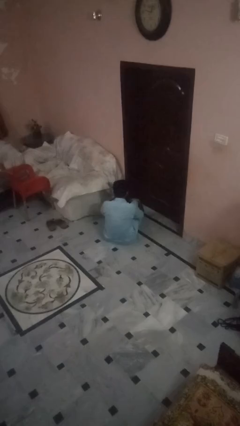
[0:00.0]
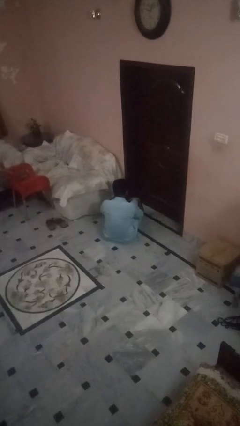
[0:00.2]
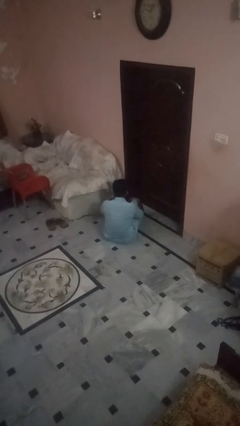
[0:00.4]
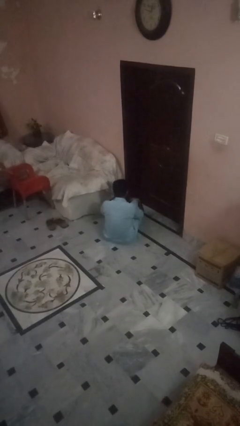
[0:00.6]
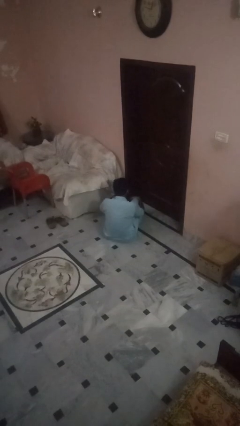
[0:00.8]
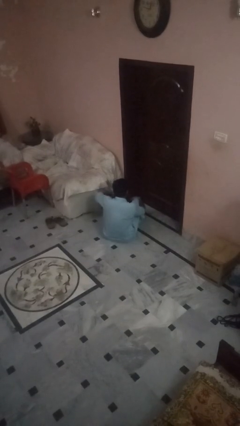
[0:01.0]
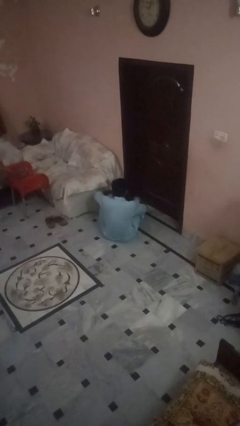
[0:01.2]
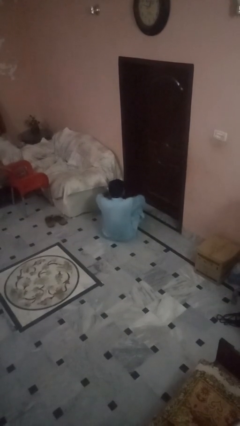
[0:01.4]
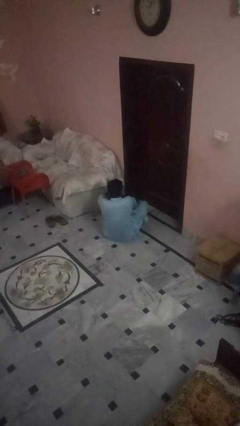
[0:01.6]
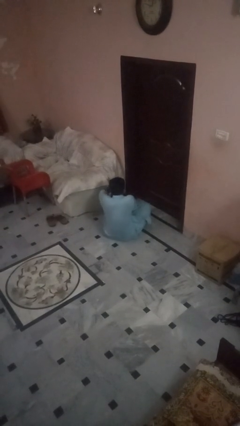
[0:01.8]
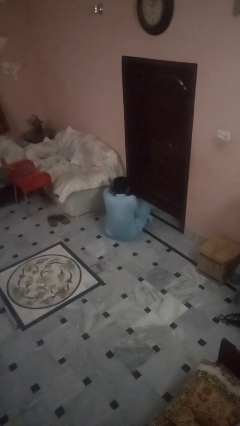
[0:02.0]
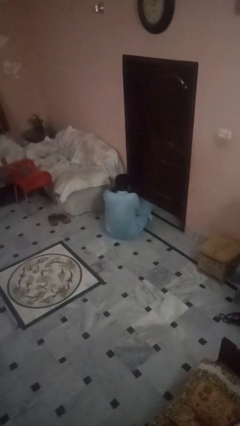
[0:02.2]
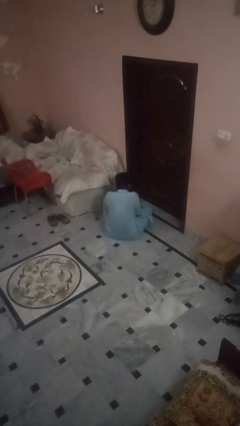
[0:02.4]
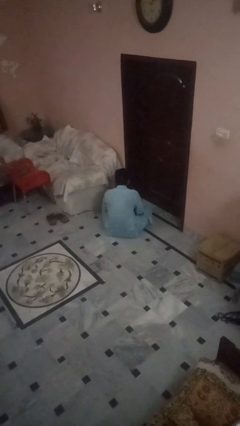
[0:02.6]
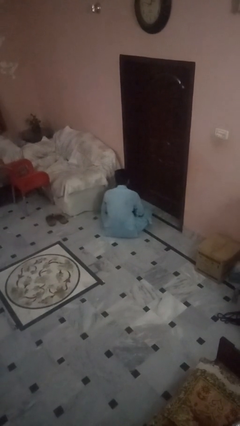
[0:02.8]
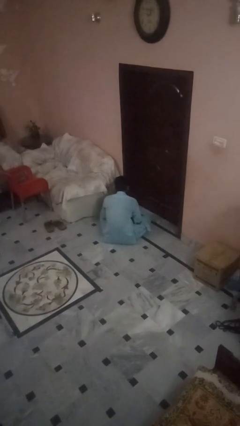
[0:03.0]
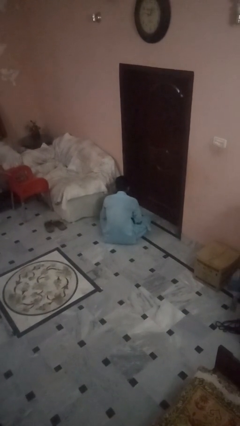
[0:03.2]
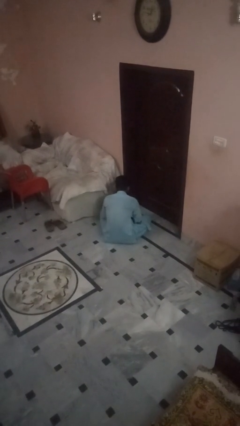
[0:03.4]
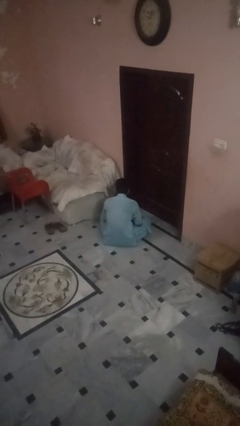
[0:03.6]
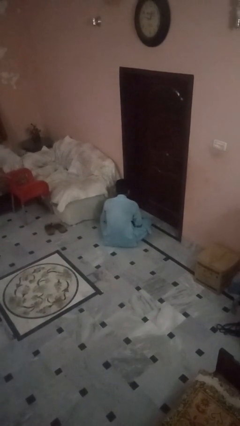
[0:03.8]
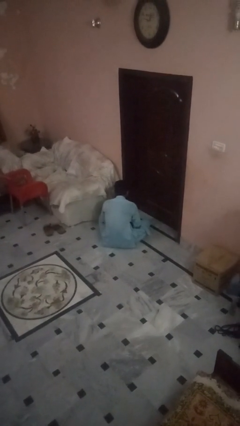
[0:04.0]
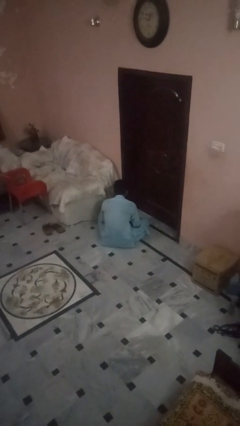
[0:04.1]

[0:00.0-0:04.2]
person crosses legs

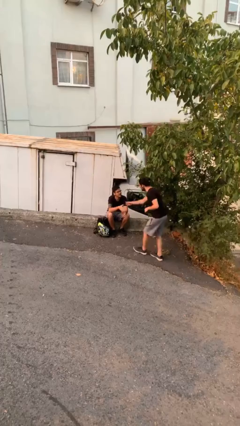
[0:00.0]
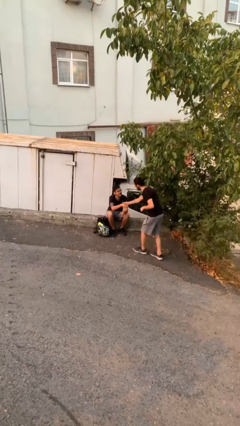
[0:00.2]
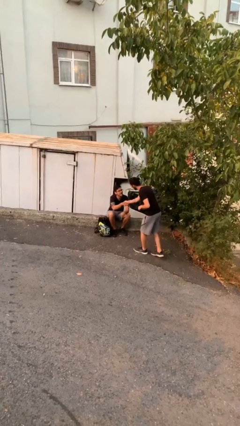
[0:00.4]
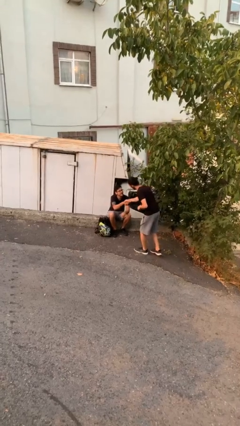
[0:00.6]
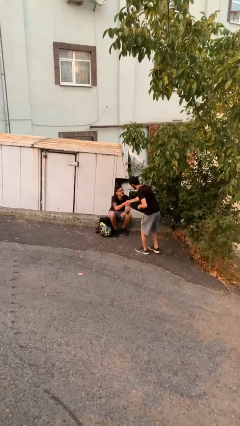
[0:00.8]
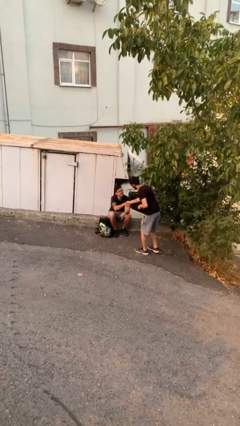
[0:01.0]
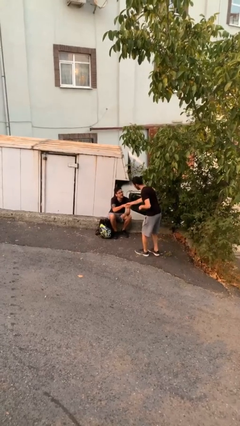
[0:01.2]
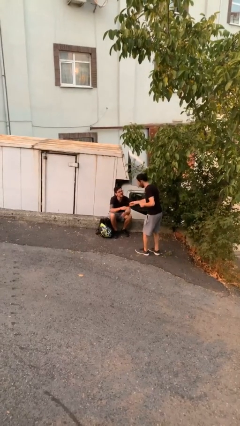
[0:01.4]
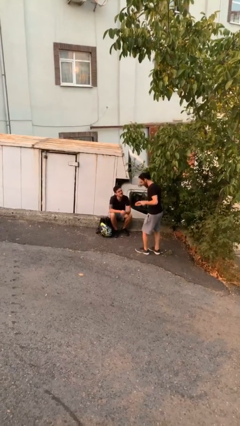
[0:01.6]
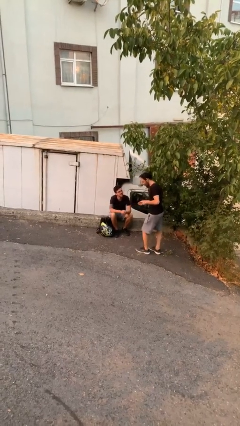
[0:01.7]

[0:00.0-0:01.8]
person shakes hand

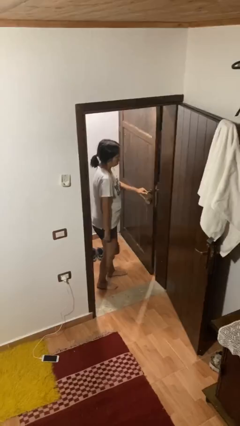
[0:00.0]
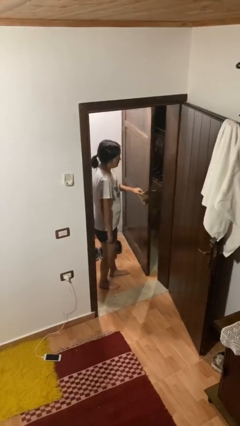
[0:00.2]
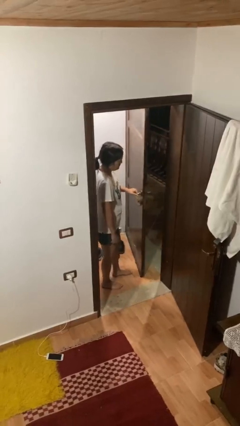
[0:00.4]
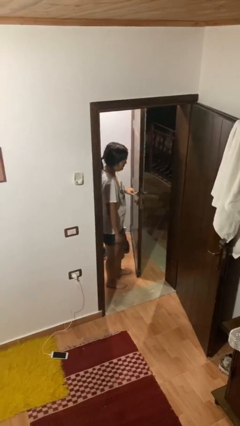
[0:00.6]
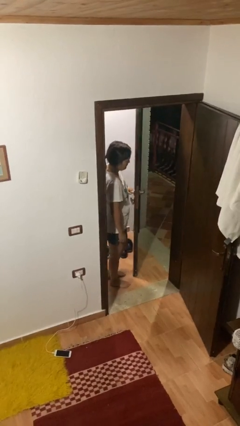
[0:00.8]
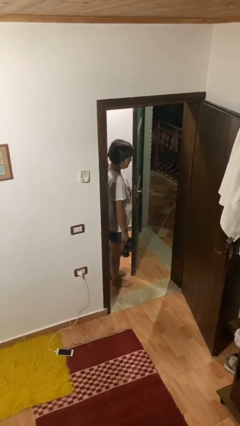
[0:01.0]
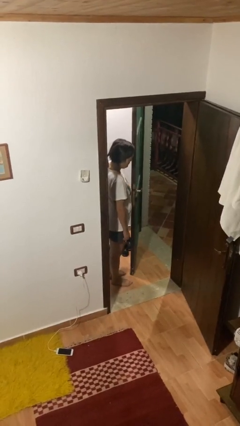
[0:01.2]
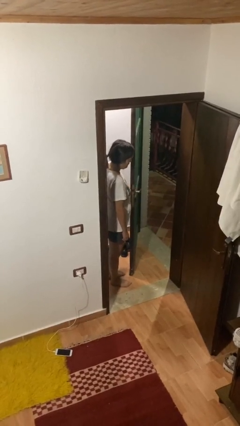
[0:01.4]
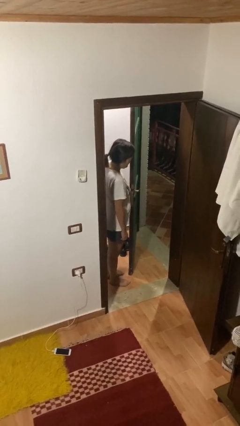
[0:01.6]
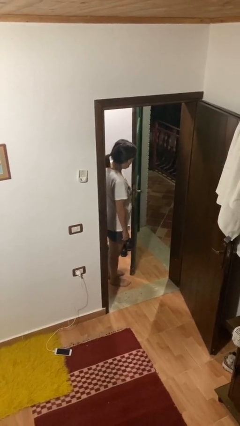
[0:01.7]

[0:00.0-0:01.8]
person opens facility door

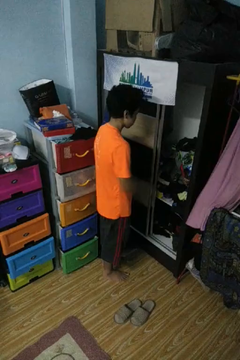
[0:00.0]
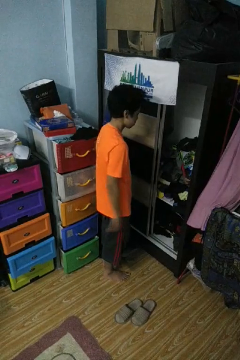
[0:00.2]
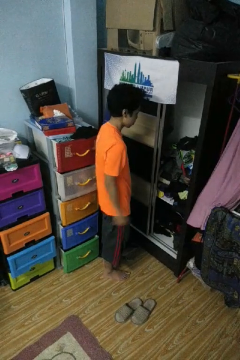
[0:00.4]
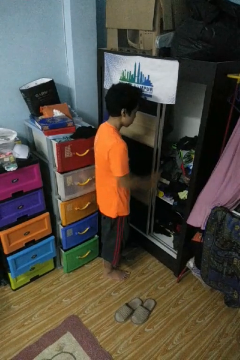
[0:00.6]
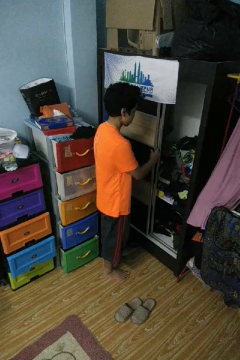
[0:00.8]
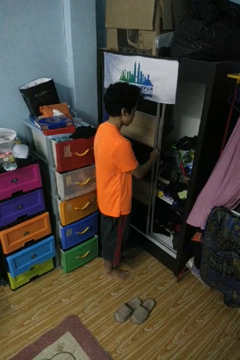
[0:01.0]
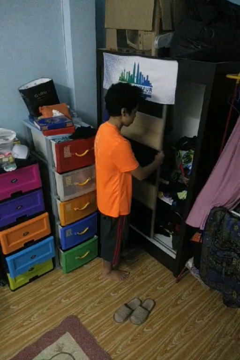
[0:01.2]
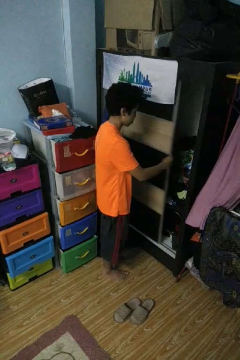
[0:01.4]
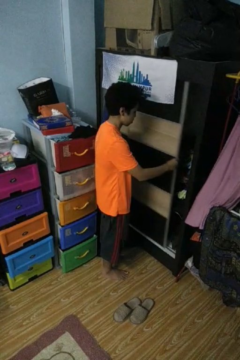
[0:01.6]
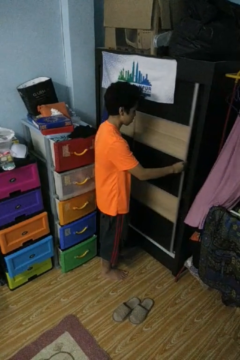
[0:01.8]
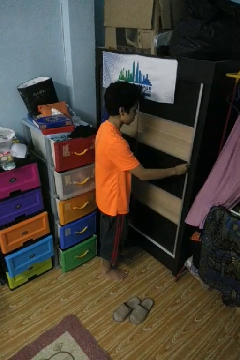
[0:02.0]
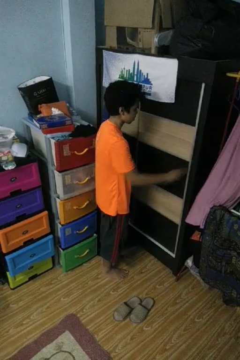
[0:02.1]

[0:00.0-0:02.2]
person closes closet door

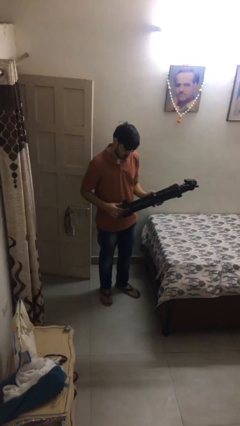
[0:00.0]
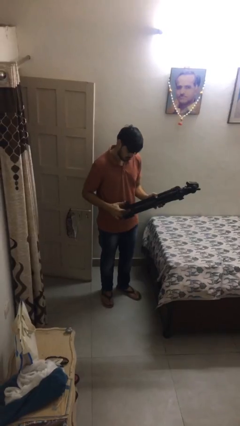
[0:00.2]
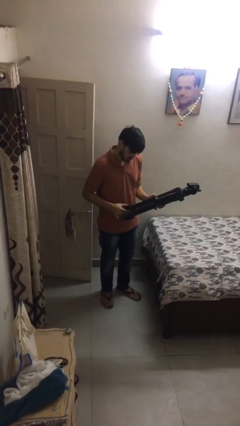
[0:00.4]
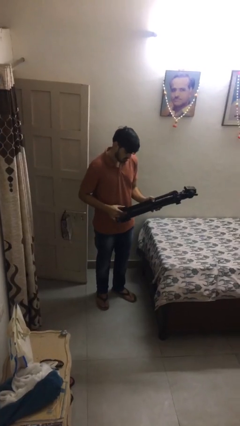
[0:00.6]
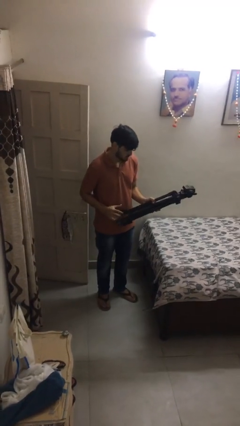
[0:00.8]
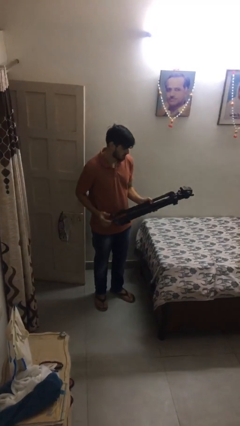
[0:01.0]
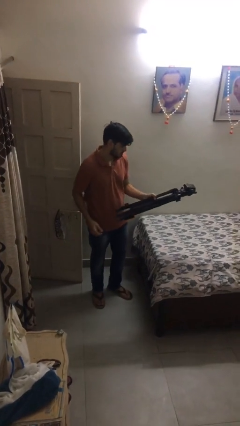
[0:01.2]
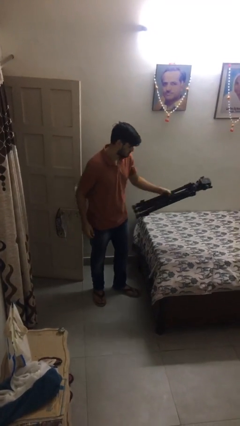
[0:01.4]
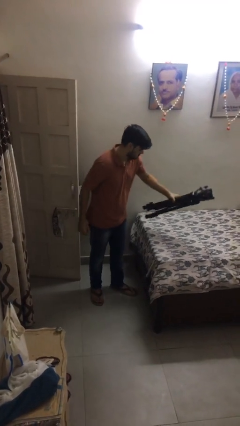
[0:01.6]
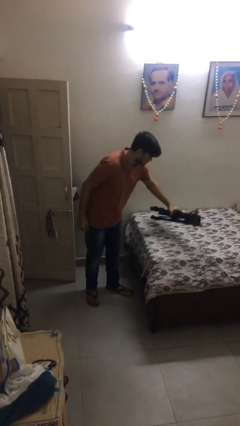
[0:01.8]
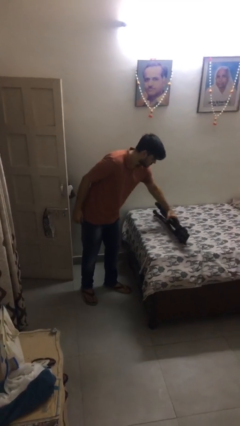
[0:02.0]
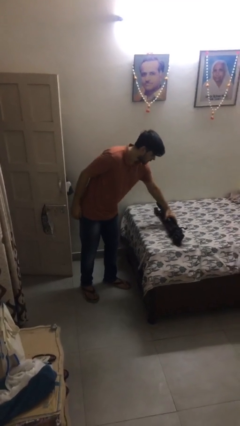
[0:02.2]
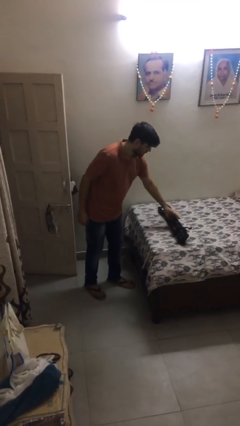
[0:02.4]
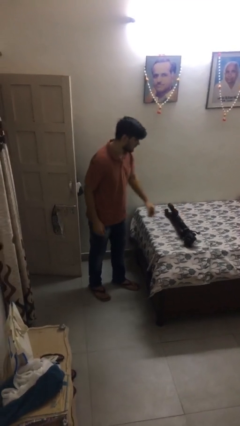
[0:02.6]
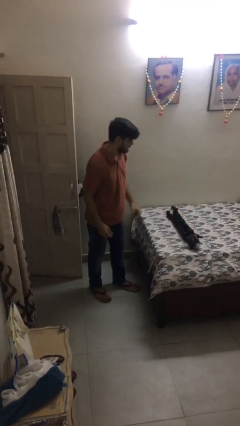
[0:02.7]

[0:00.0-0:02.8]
person puts down object on bed

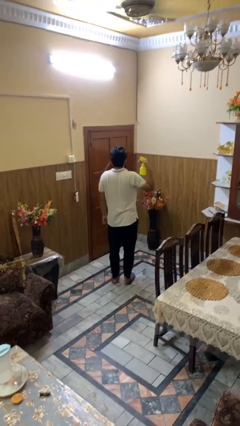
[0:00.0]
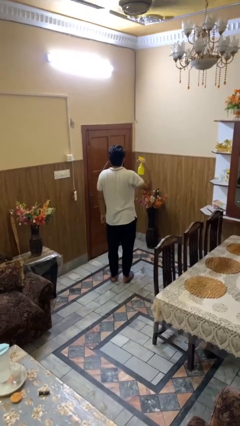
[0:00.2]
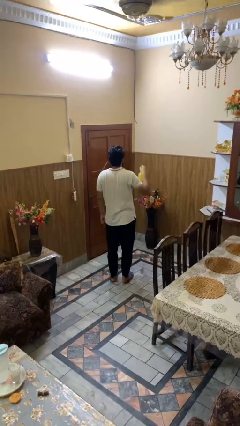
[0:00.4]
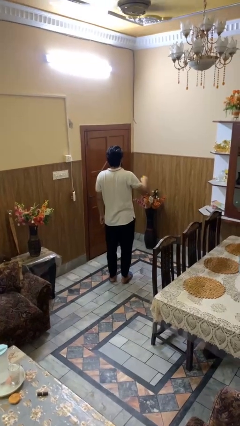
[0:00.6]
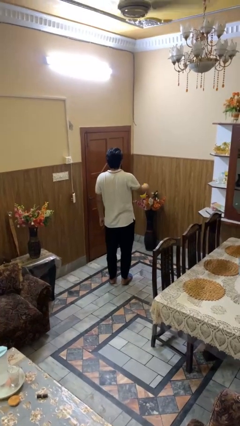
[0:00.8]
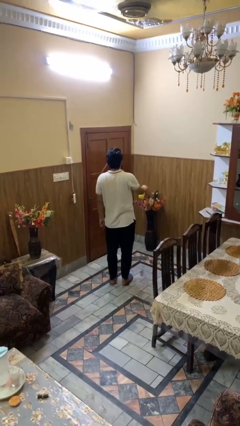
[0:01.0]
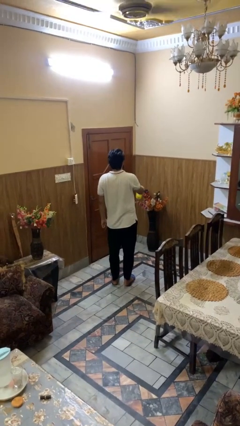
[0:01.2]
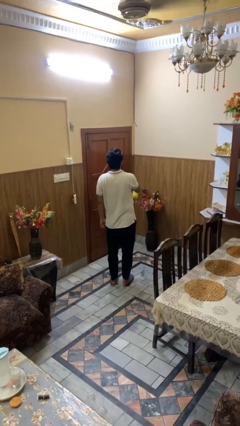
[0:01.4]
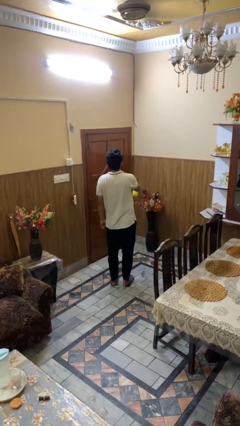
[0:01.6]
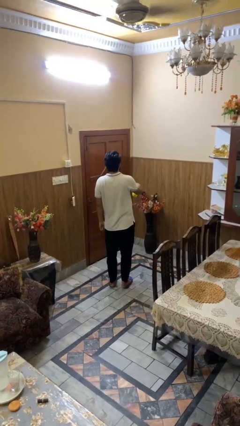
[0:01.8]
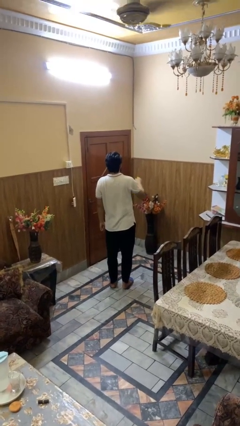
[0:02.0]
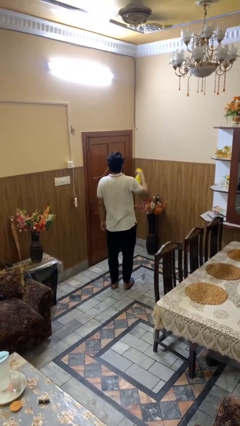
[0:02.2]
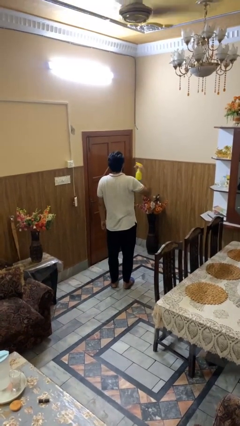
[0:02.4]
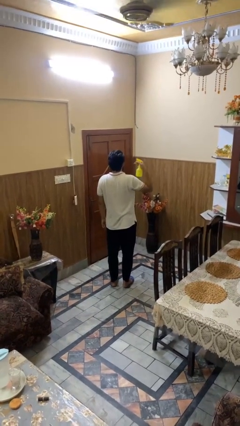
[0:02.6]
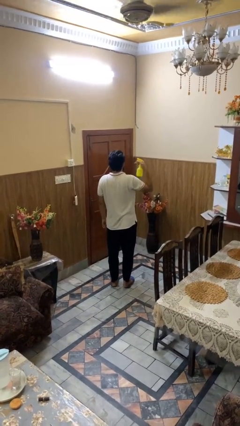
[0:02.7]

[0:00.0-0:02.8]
person sprays from bottle

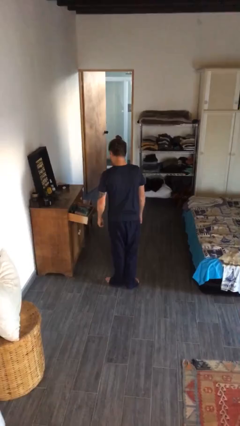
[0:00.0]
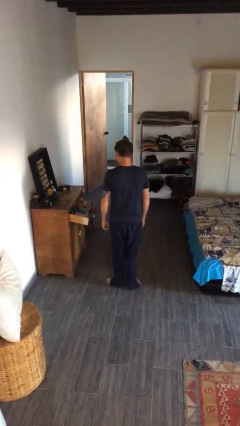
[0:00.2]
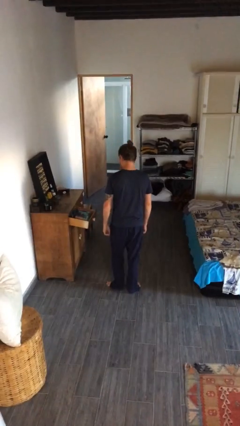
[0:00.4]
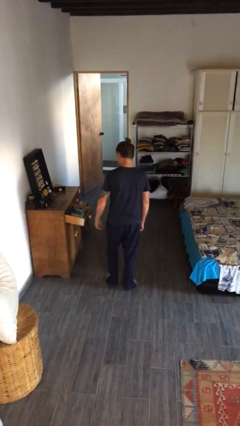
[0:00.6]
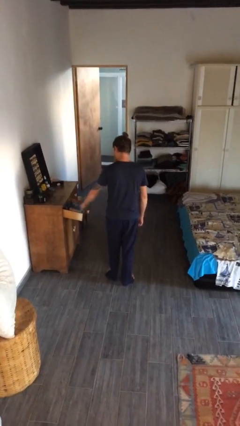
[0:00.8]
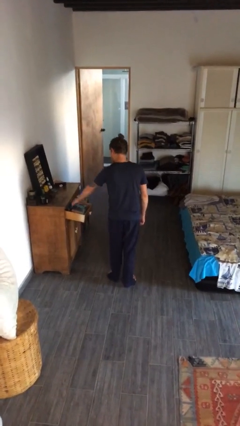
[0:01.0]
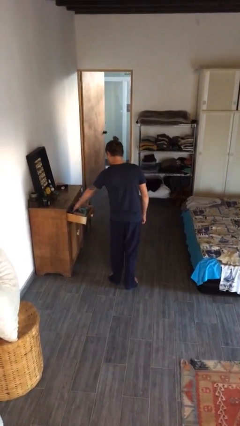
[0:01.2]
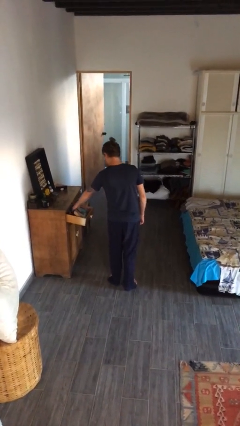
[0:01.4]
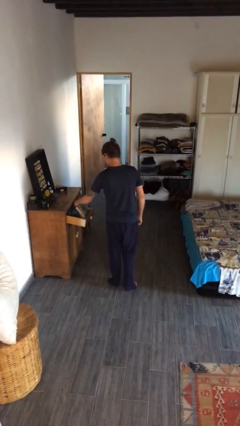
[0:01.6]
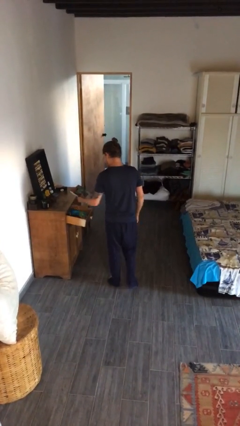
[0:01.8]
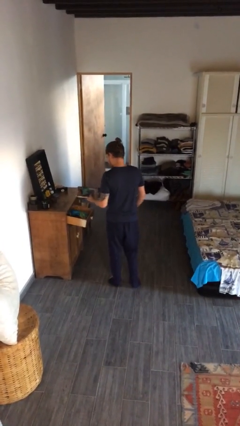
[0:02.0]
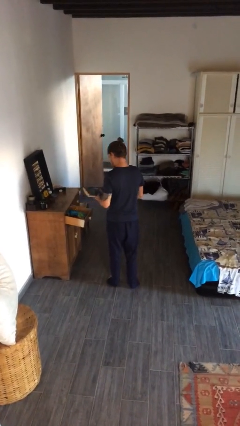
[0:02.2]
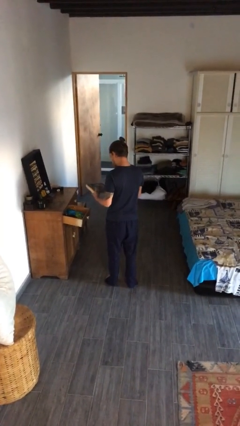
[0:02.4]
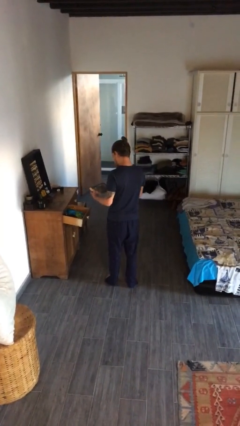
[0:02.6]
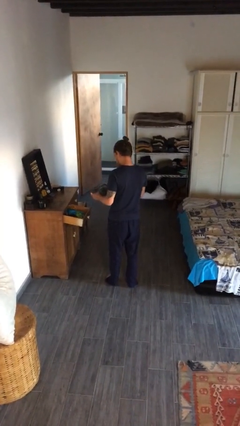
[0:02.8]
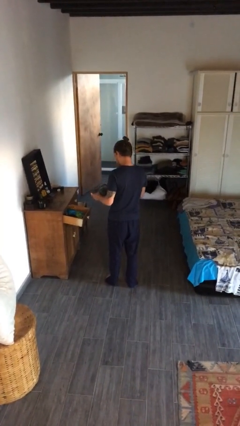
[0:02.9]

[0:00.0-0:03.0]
person picks up object from cabinet
